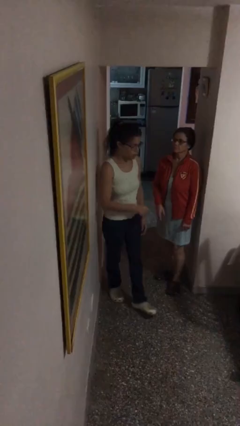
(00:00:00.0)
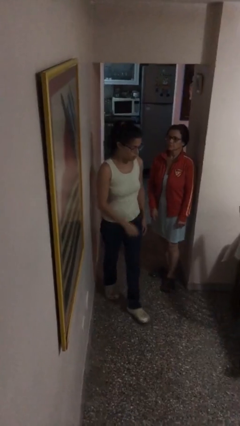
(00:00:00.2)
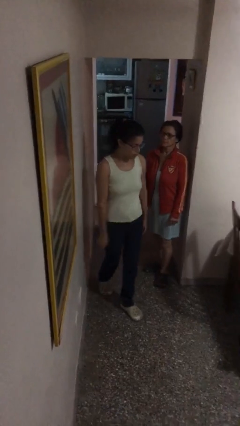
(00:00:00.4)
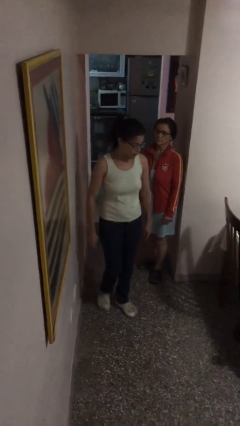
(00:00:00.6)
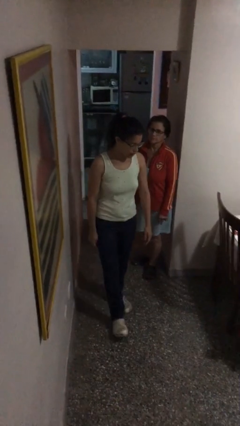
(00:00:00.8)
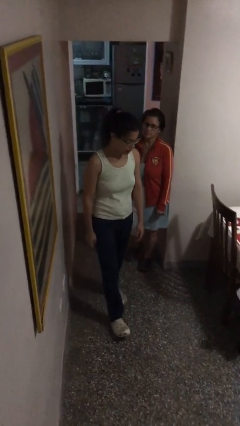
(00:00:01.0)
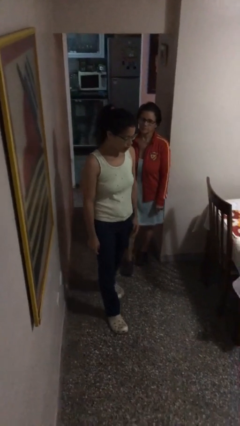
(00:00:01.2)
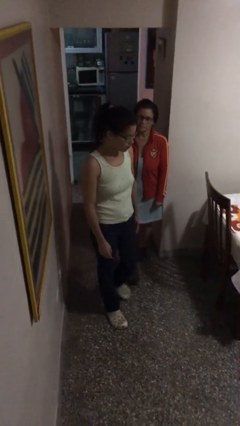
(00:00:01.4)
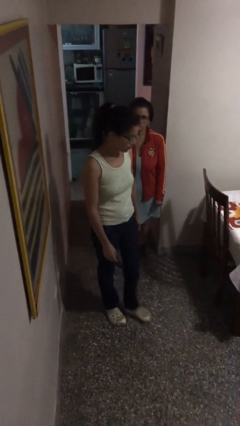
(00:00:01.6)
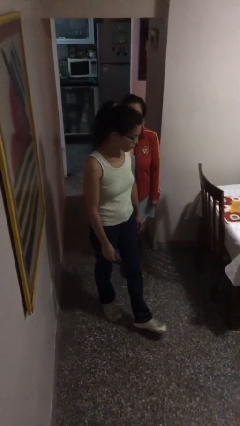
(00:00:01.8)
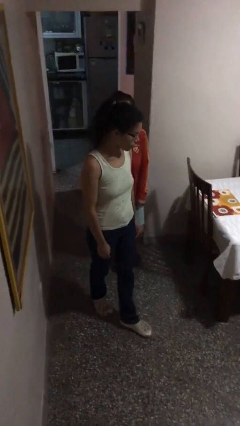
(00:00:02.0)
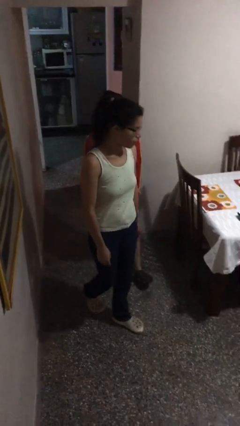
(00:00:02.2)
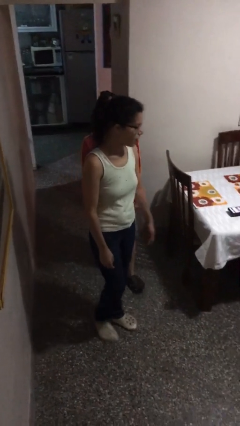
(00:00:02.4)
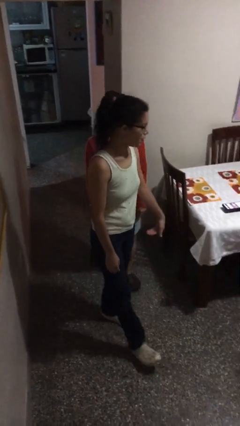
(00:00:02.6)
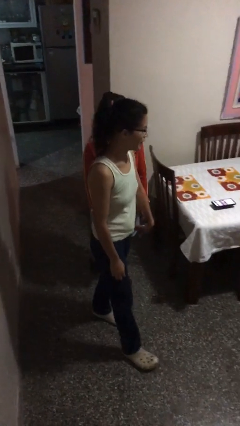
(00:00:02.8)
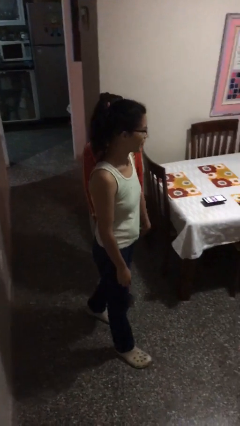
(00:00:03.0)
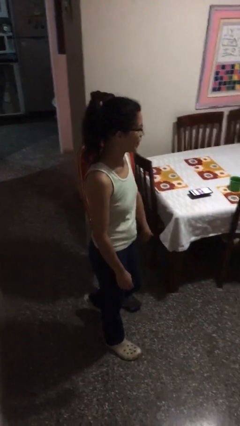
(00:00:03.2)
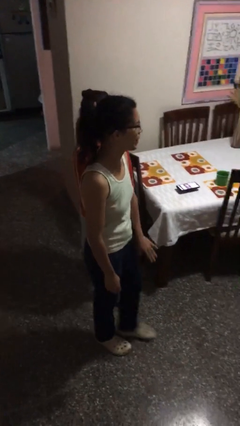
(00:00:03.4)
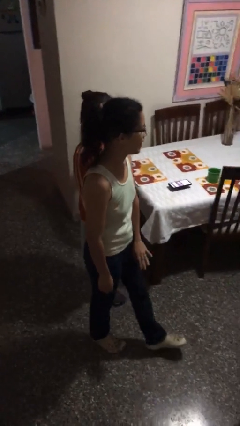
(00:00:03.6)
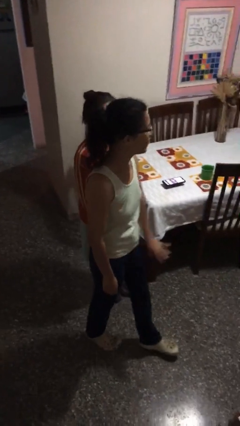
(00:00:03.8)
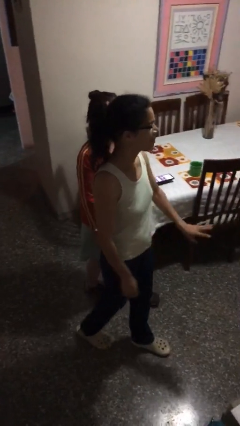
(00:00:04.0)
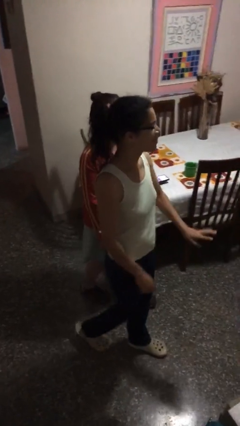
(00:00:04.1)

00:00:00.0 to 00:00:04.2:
person talks to person

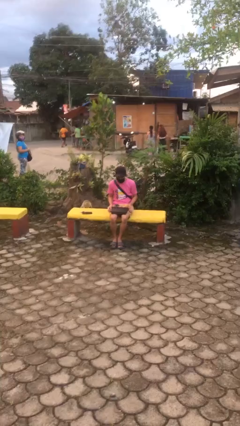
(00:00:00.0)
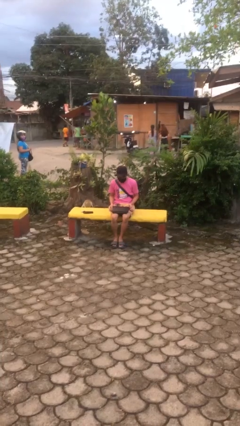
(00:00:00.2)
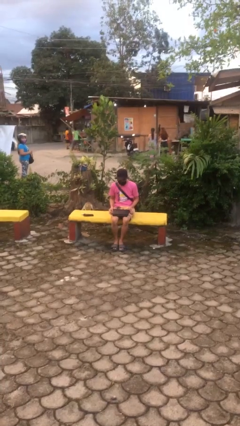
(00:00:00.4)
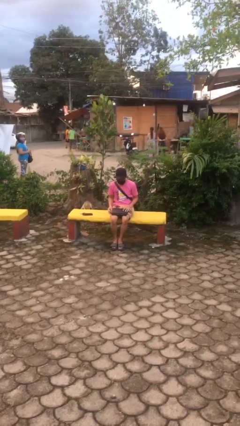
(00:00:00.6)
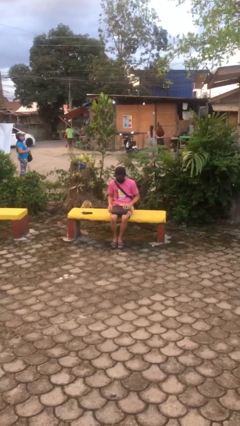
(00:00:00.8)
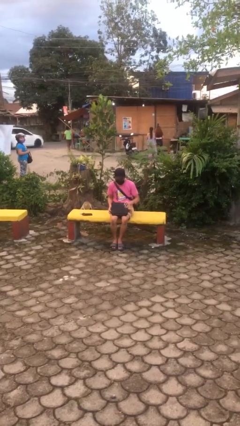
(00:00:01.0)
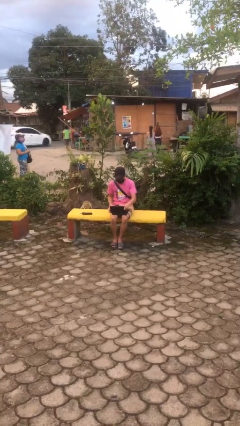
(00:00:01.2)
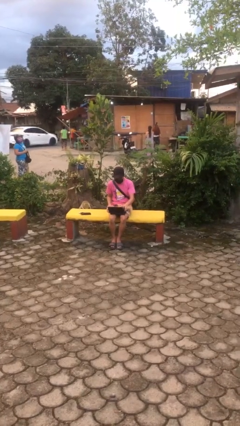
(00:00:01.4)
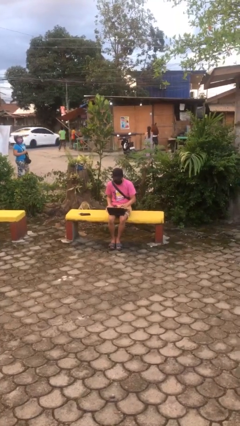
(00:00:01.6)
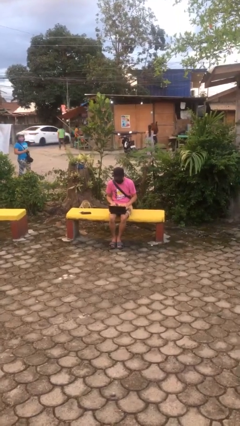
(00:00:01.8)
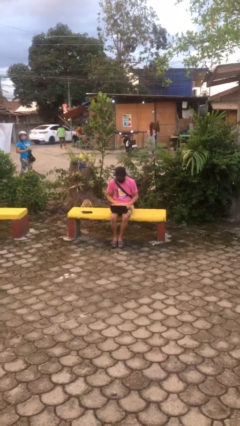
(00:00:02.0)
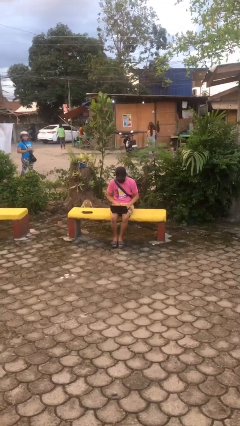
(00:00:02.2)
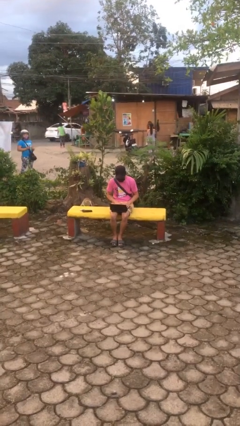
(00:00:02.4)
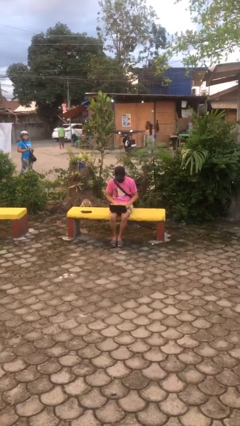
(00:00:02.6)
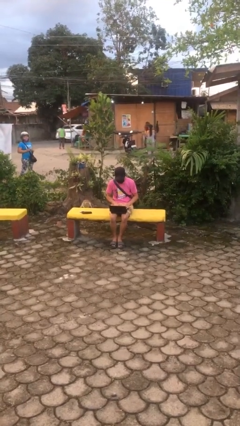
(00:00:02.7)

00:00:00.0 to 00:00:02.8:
person interacts with laptop

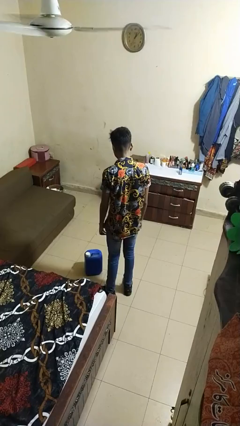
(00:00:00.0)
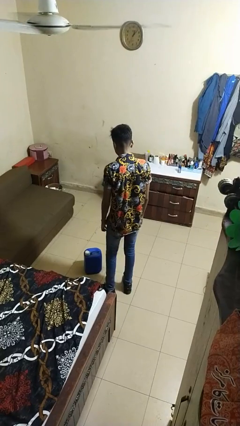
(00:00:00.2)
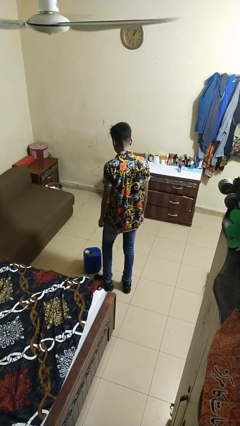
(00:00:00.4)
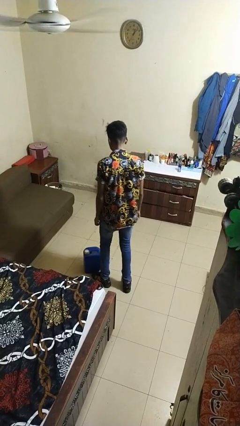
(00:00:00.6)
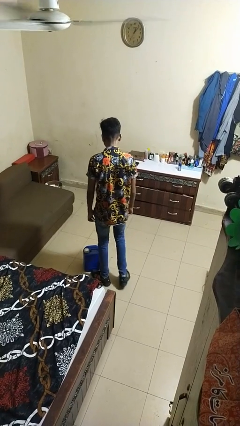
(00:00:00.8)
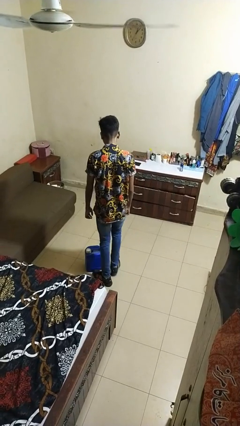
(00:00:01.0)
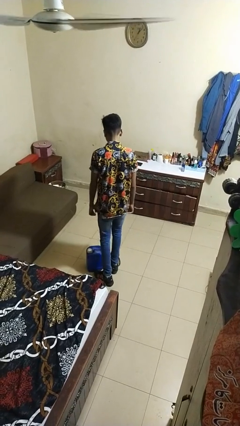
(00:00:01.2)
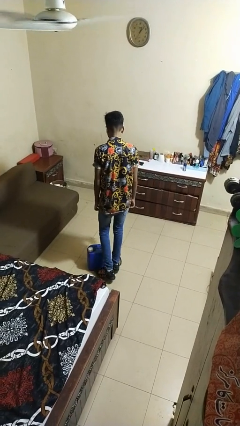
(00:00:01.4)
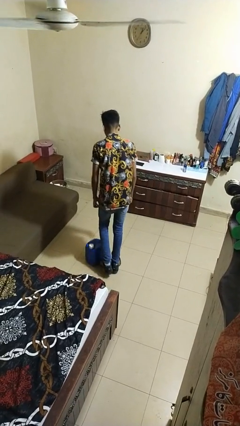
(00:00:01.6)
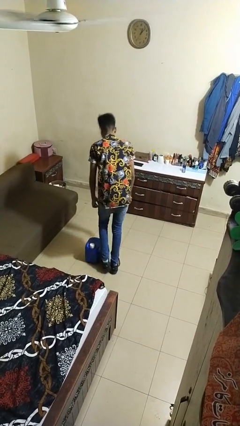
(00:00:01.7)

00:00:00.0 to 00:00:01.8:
person trips on object on floor

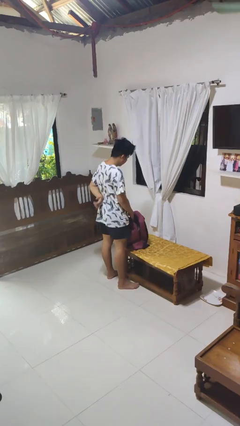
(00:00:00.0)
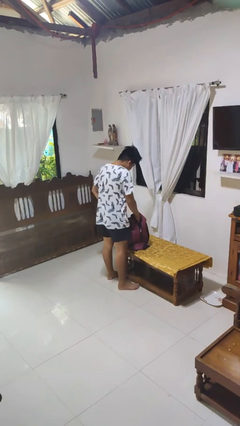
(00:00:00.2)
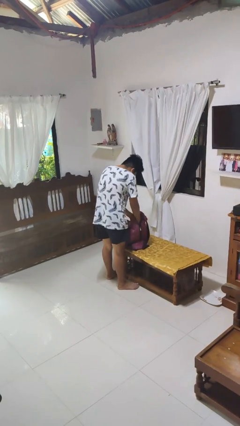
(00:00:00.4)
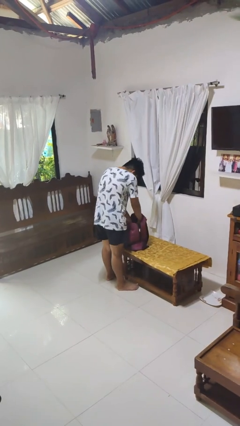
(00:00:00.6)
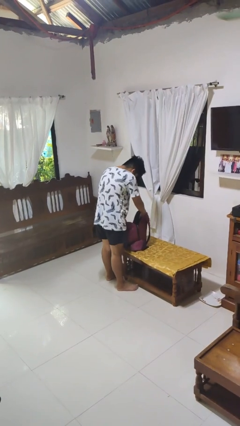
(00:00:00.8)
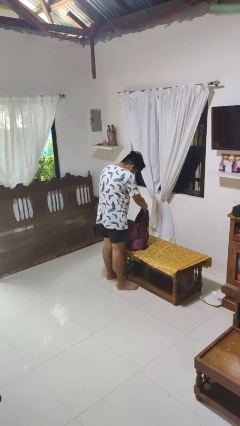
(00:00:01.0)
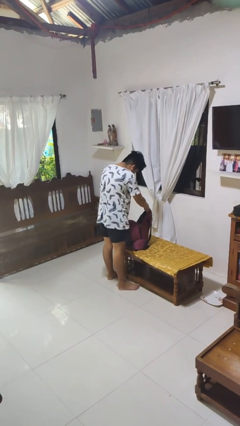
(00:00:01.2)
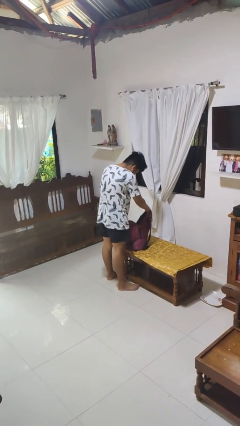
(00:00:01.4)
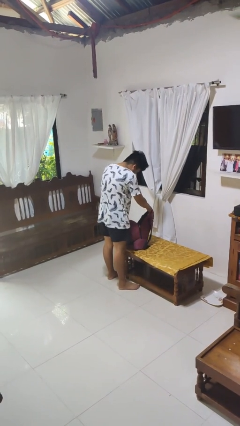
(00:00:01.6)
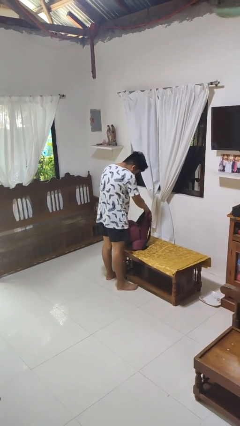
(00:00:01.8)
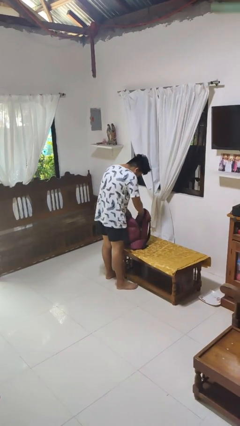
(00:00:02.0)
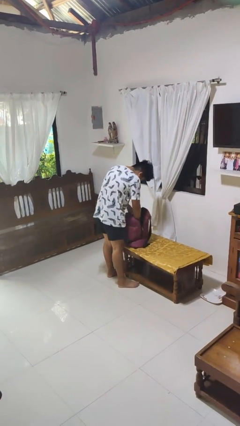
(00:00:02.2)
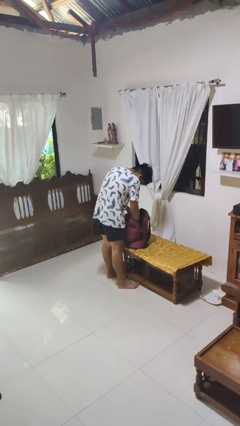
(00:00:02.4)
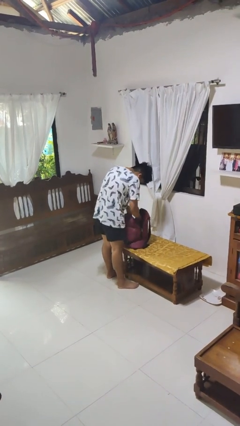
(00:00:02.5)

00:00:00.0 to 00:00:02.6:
person searches in bag

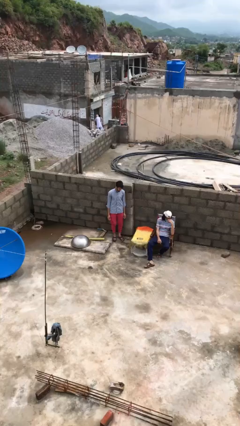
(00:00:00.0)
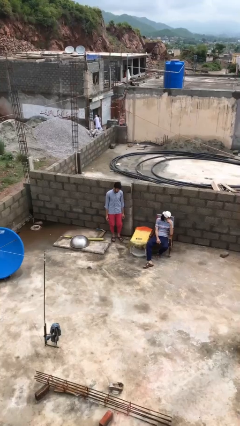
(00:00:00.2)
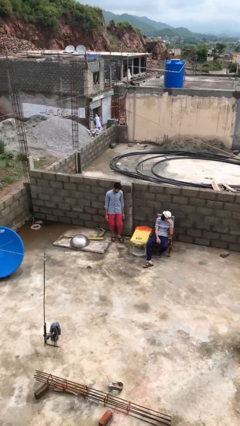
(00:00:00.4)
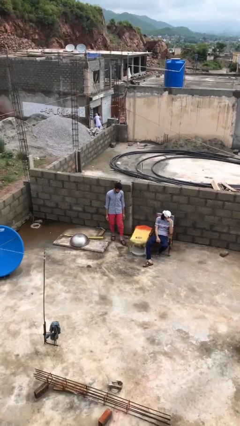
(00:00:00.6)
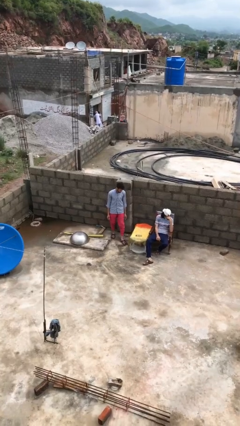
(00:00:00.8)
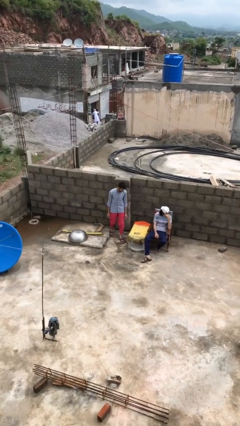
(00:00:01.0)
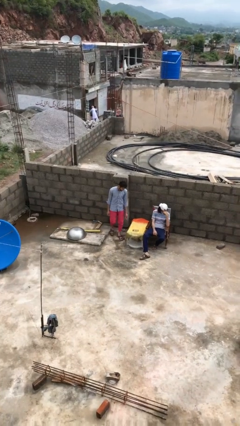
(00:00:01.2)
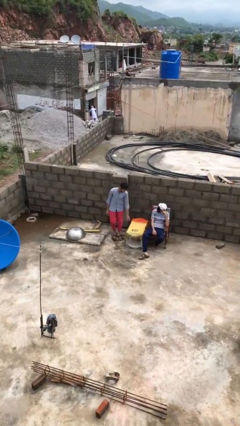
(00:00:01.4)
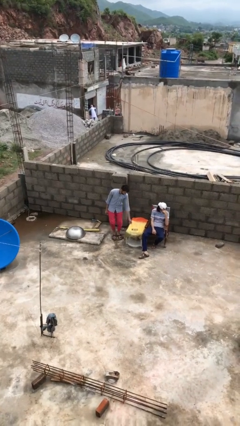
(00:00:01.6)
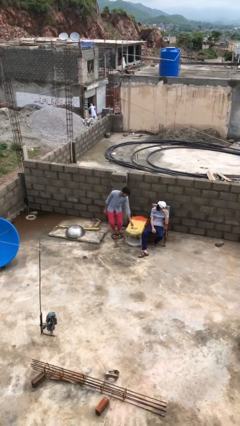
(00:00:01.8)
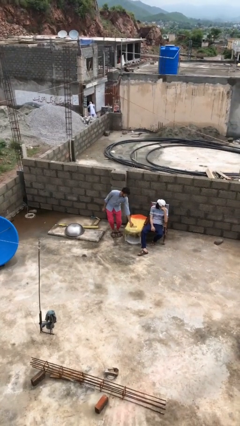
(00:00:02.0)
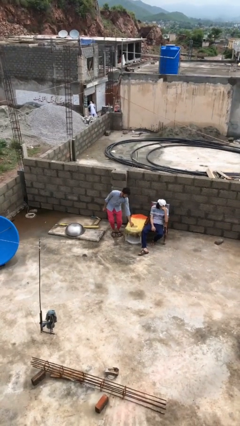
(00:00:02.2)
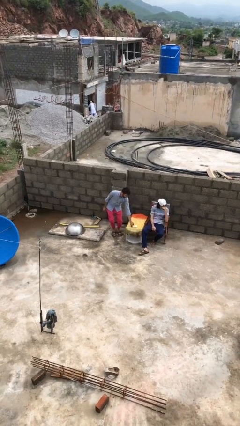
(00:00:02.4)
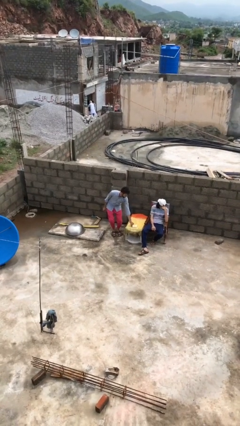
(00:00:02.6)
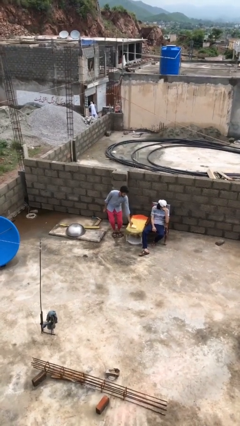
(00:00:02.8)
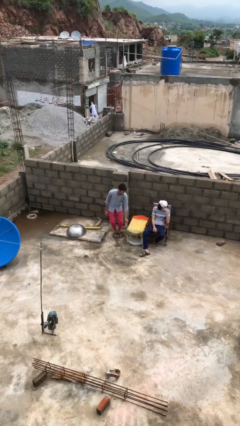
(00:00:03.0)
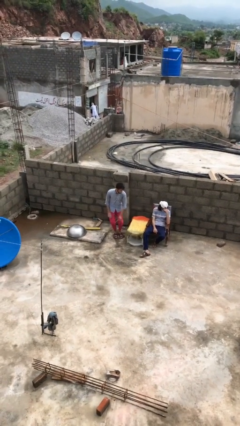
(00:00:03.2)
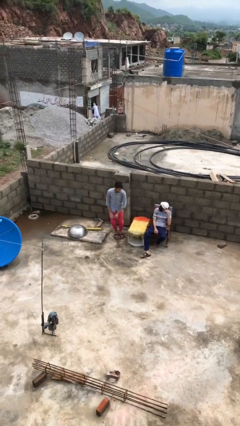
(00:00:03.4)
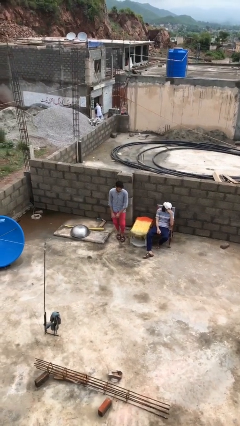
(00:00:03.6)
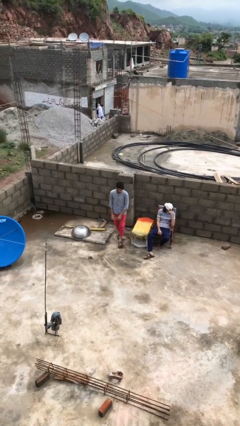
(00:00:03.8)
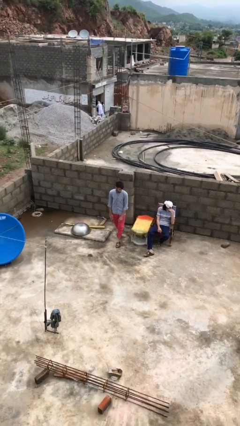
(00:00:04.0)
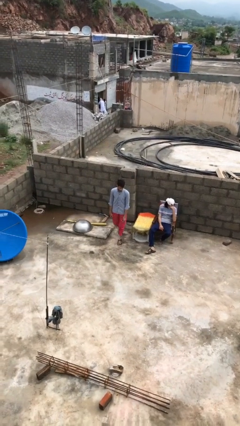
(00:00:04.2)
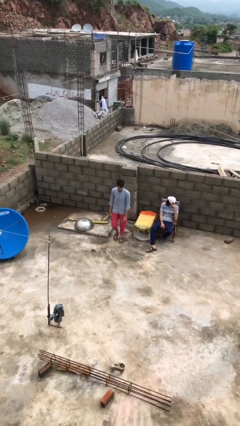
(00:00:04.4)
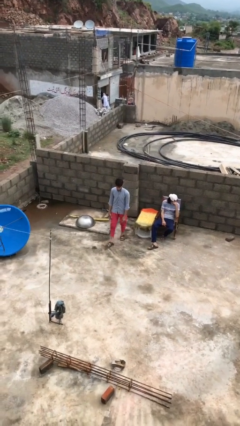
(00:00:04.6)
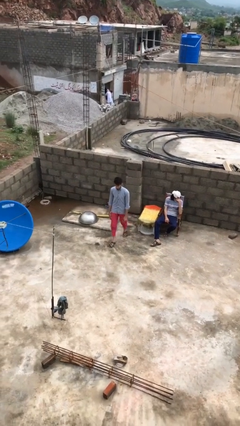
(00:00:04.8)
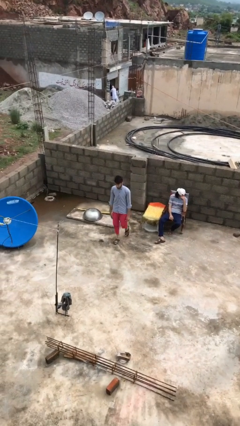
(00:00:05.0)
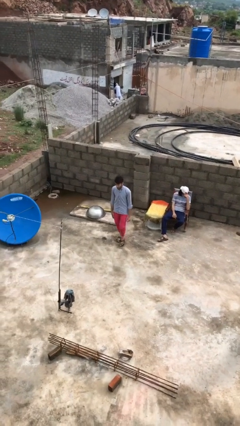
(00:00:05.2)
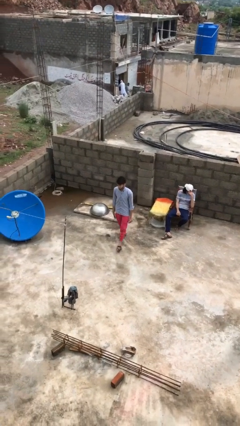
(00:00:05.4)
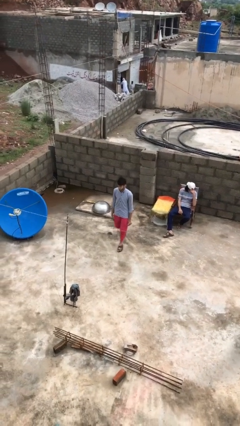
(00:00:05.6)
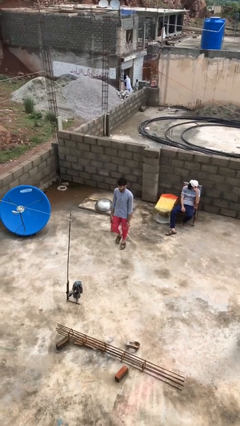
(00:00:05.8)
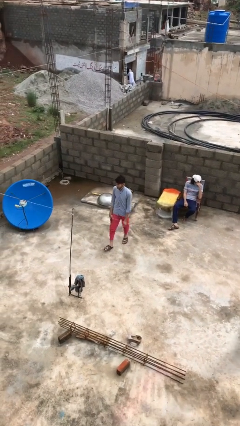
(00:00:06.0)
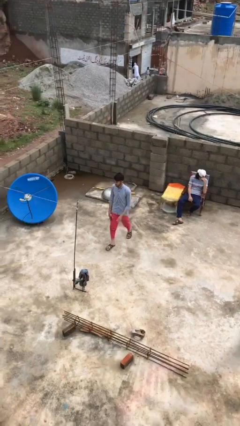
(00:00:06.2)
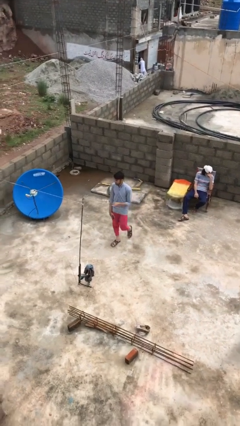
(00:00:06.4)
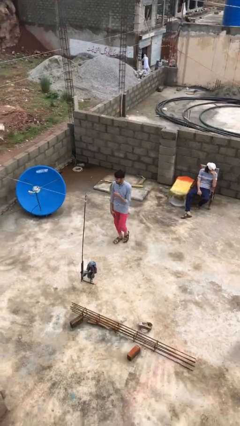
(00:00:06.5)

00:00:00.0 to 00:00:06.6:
person steals object from person
